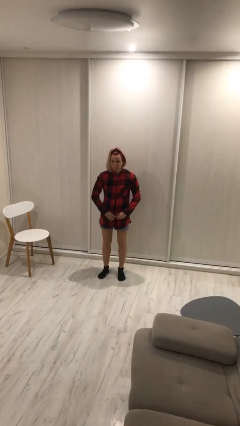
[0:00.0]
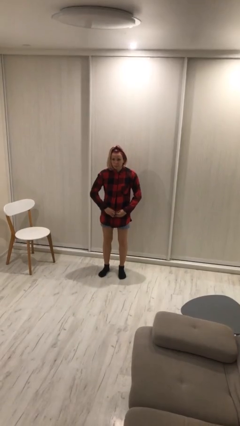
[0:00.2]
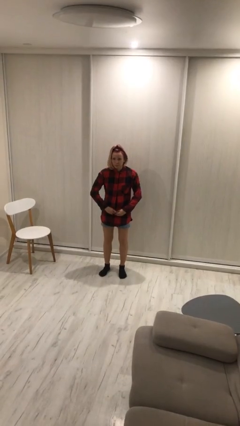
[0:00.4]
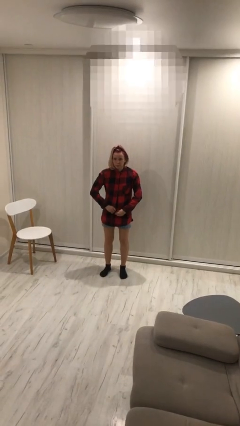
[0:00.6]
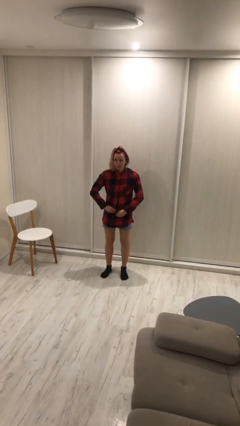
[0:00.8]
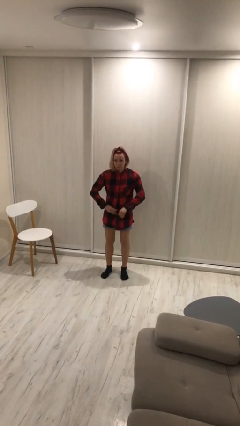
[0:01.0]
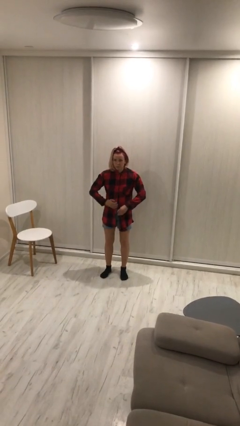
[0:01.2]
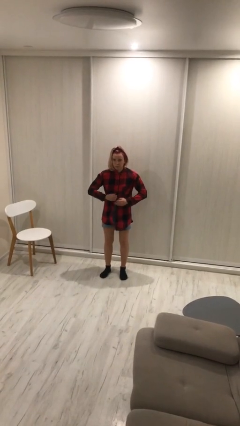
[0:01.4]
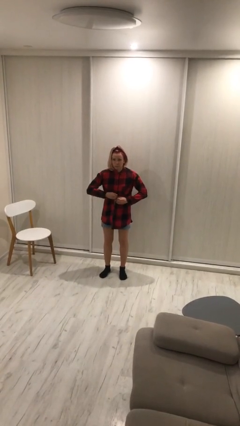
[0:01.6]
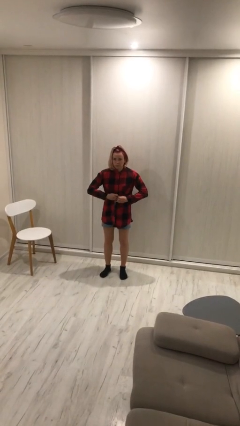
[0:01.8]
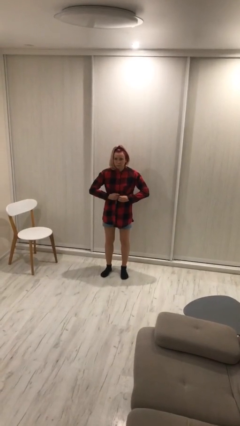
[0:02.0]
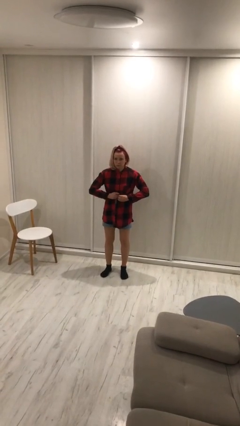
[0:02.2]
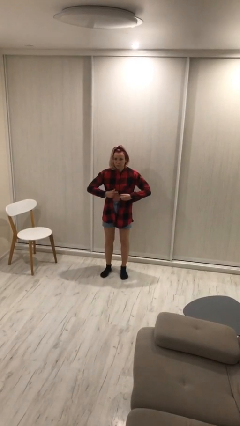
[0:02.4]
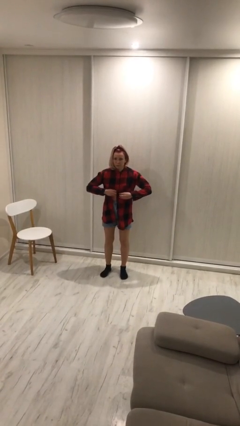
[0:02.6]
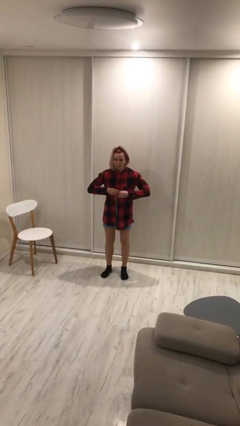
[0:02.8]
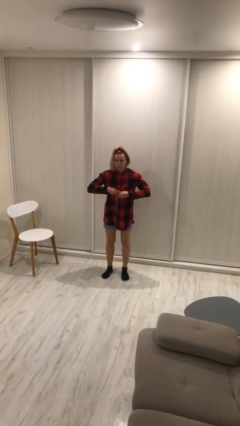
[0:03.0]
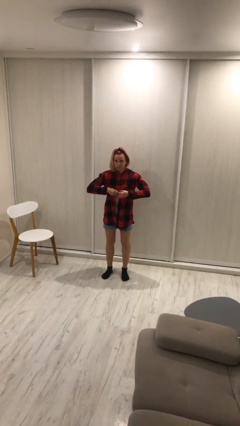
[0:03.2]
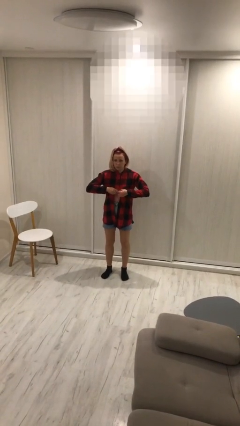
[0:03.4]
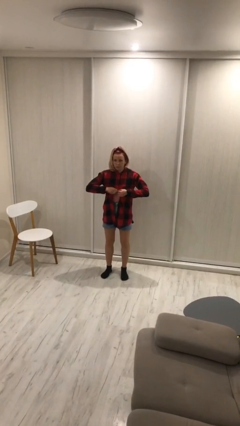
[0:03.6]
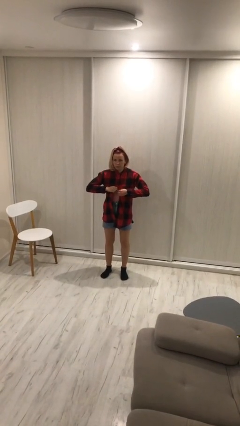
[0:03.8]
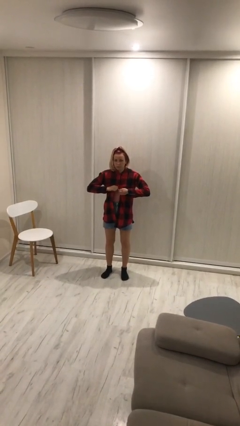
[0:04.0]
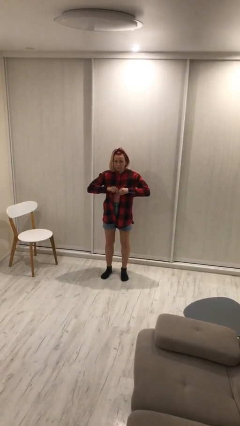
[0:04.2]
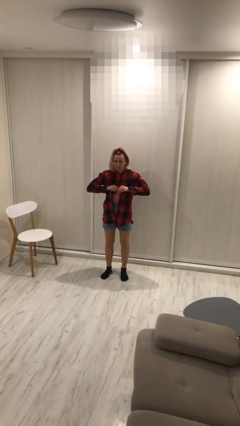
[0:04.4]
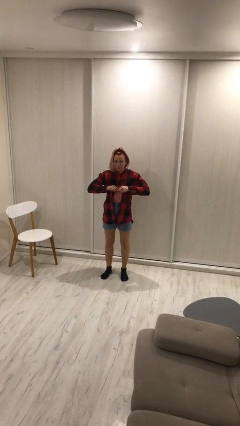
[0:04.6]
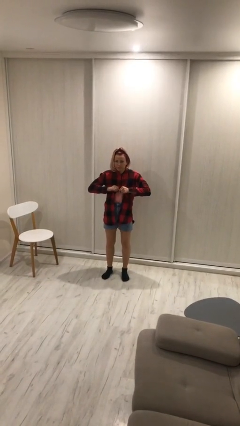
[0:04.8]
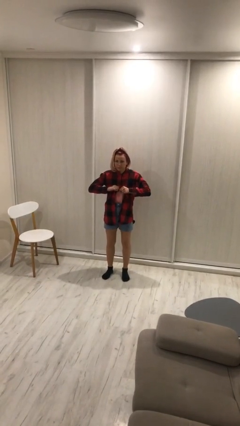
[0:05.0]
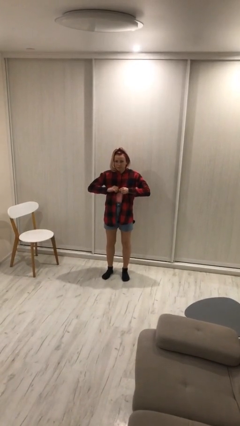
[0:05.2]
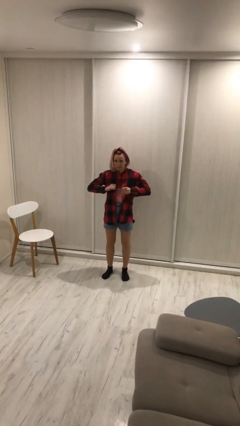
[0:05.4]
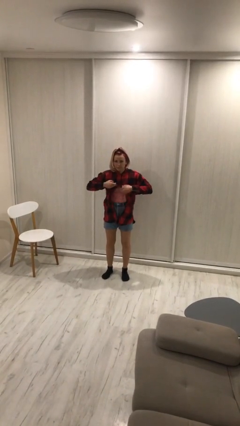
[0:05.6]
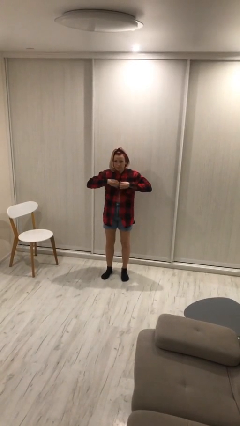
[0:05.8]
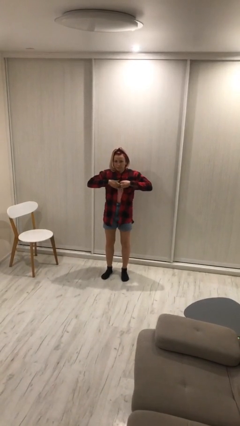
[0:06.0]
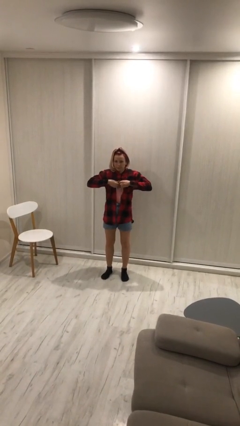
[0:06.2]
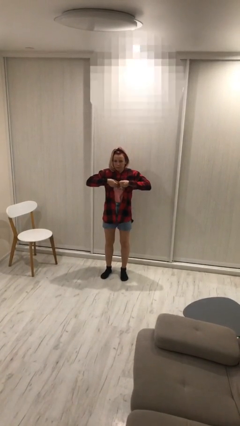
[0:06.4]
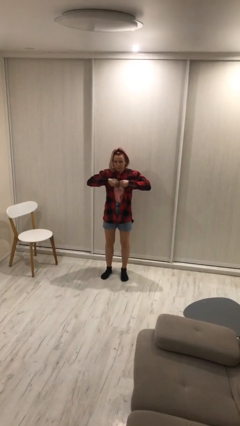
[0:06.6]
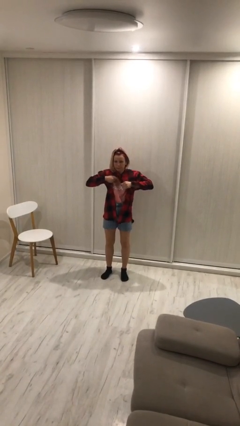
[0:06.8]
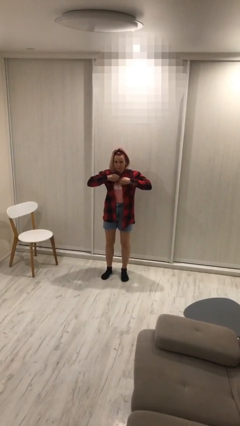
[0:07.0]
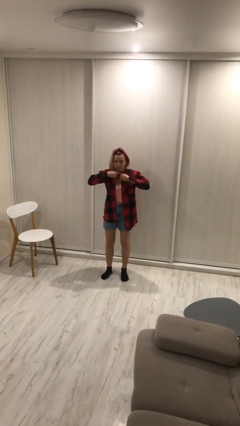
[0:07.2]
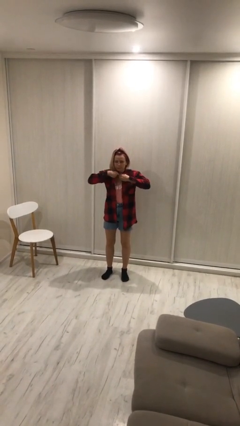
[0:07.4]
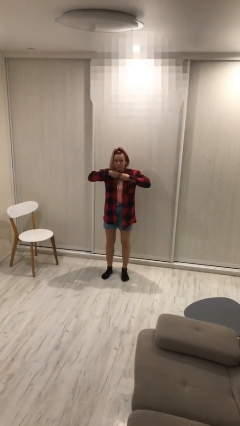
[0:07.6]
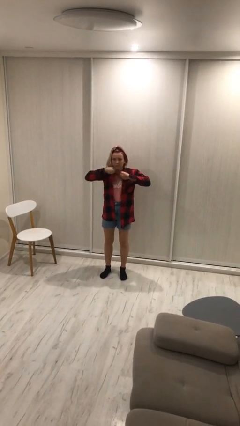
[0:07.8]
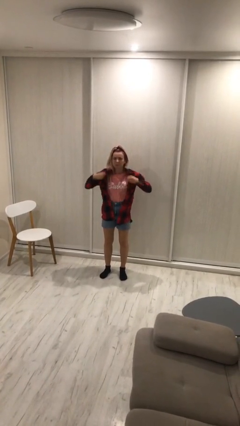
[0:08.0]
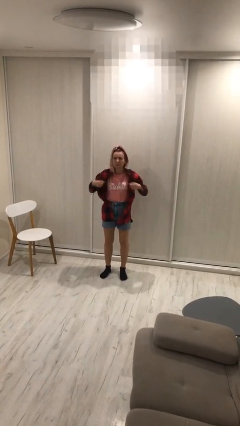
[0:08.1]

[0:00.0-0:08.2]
person unbuttons shirt

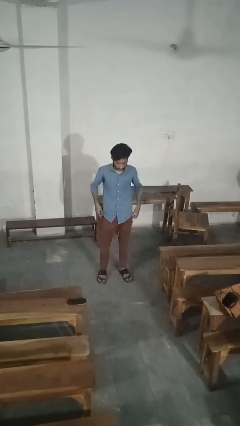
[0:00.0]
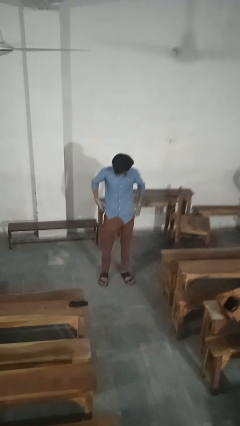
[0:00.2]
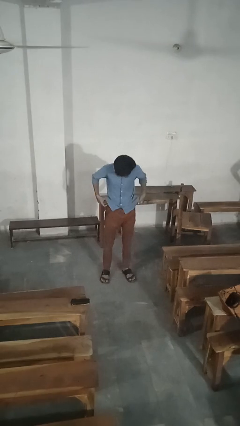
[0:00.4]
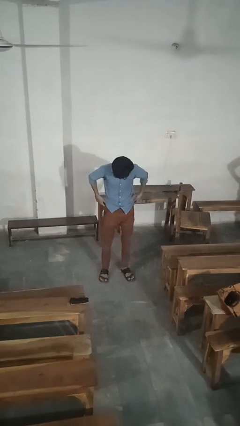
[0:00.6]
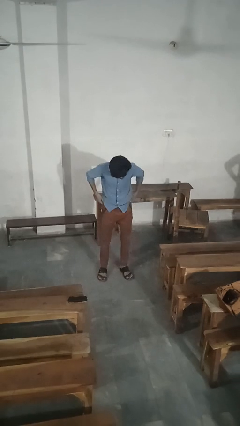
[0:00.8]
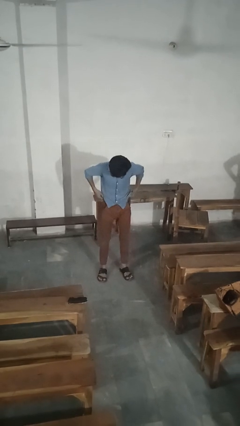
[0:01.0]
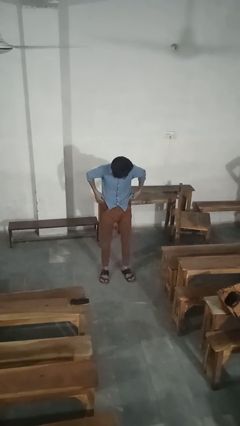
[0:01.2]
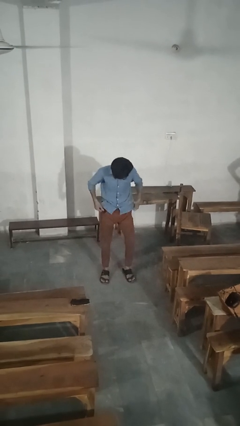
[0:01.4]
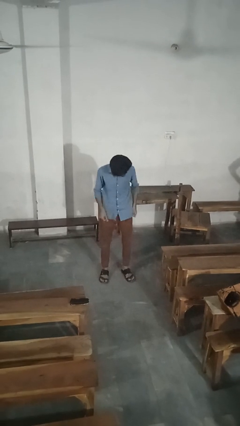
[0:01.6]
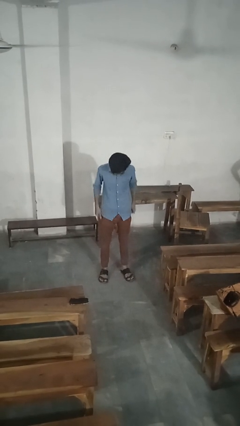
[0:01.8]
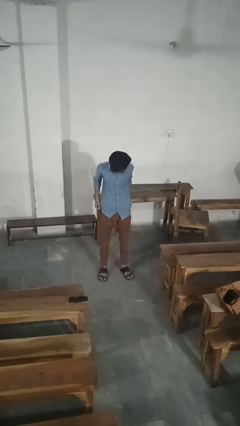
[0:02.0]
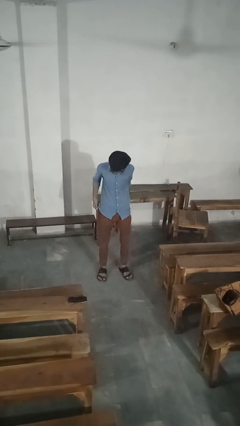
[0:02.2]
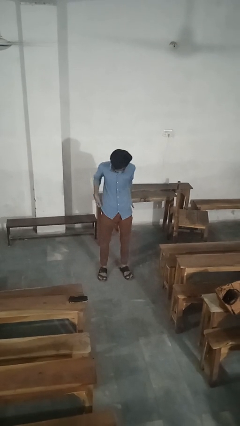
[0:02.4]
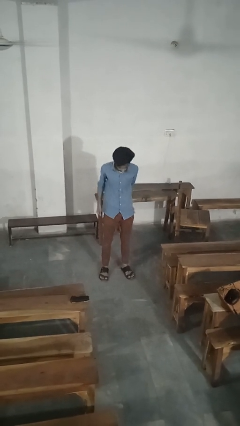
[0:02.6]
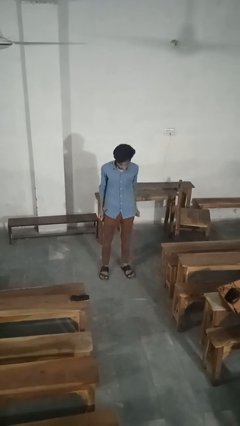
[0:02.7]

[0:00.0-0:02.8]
person hikes up pants

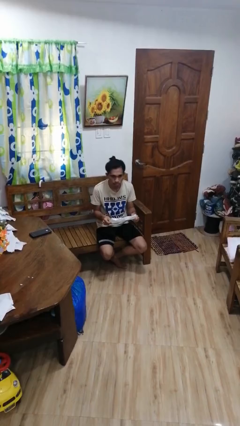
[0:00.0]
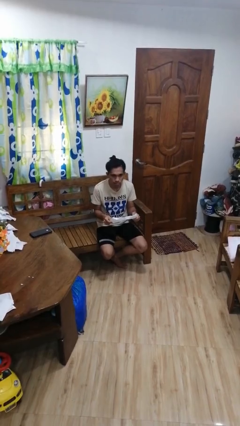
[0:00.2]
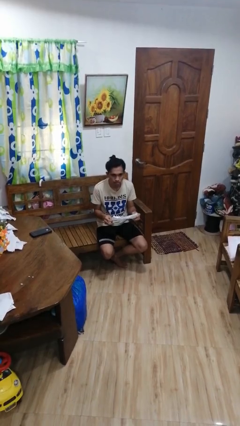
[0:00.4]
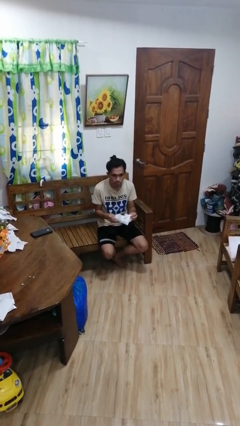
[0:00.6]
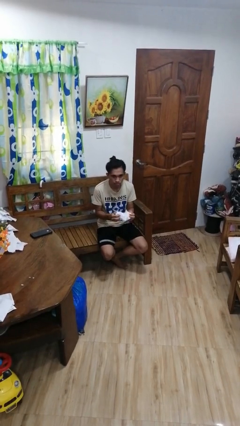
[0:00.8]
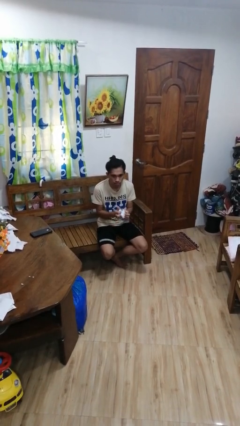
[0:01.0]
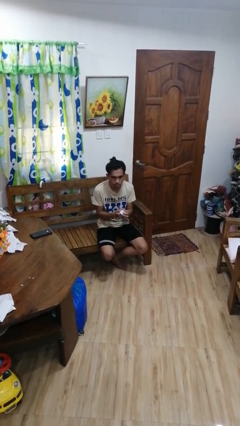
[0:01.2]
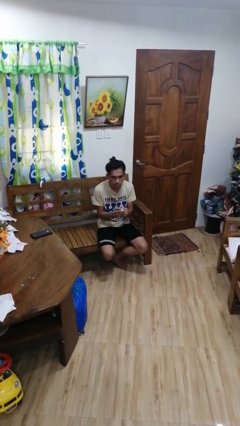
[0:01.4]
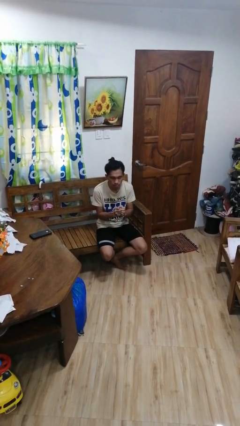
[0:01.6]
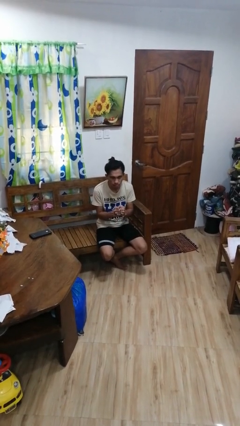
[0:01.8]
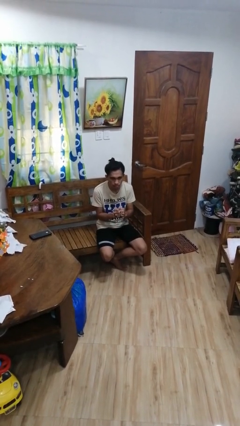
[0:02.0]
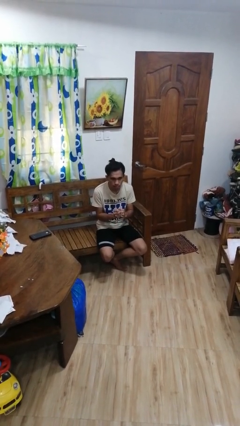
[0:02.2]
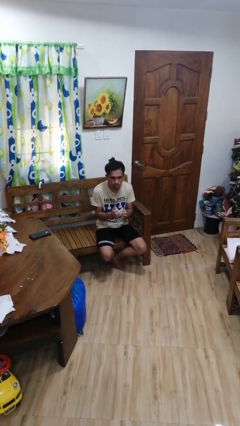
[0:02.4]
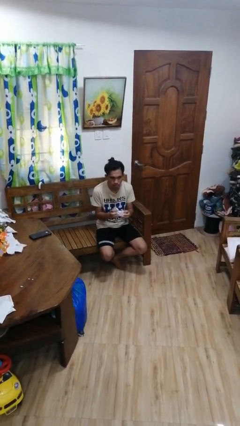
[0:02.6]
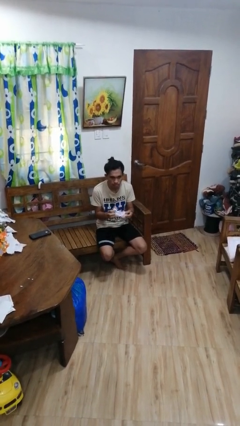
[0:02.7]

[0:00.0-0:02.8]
person crumples paper

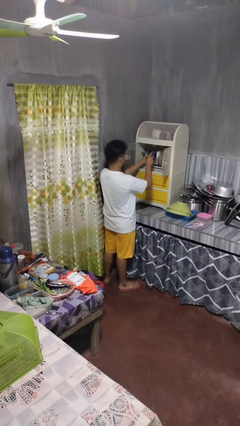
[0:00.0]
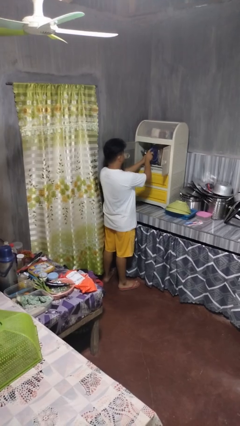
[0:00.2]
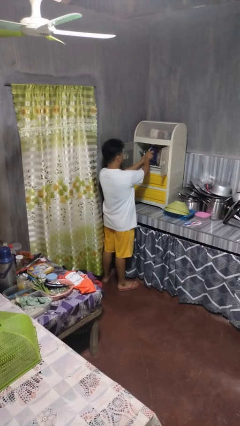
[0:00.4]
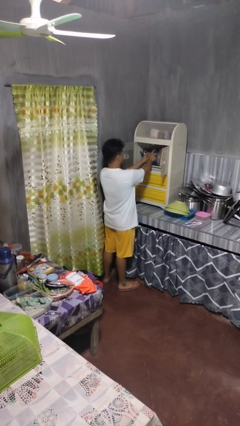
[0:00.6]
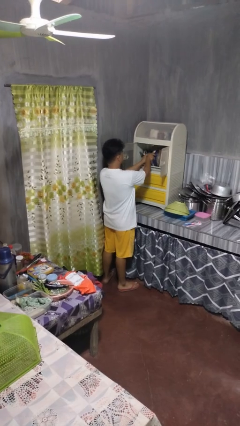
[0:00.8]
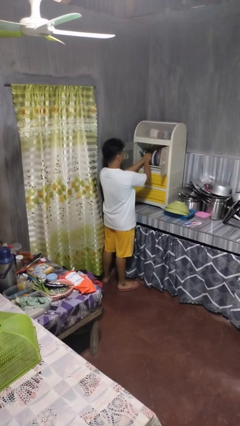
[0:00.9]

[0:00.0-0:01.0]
person puts object in cabinet

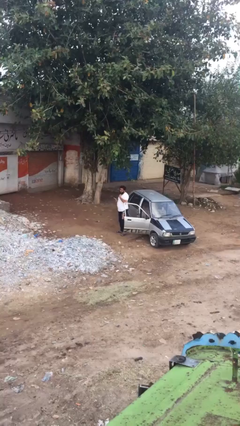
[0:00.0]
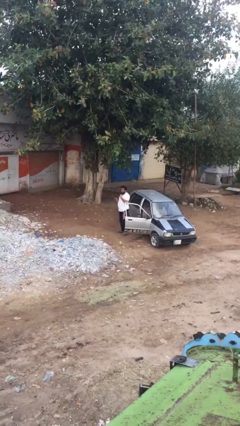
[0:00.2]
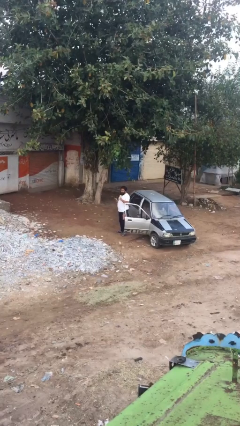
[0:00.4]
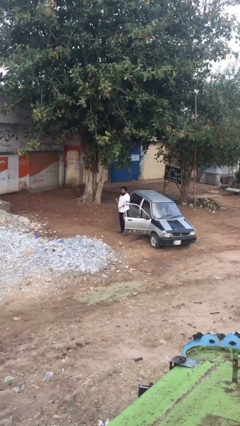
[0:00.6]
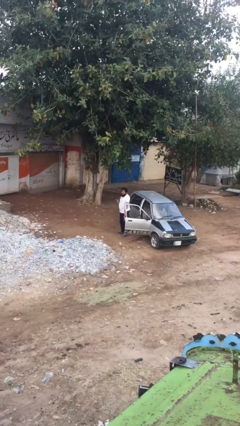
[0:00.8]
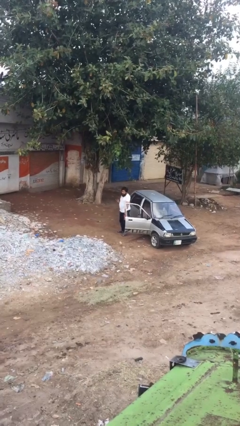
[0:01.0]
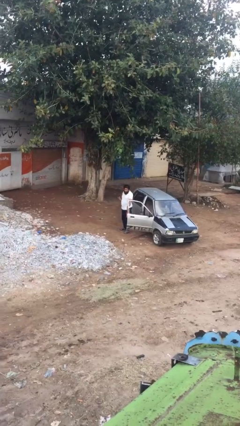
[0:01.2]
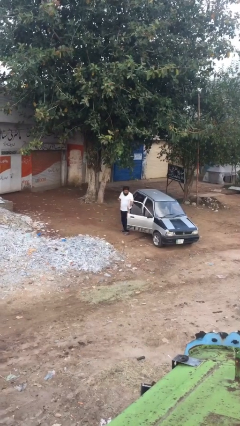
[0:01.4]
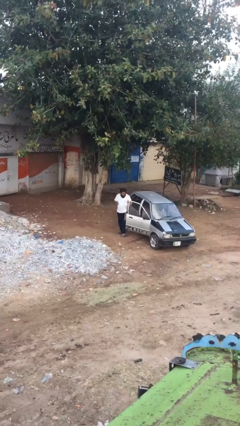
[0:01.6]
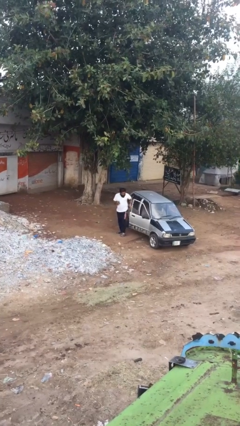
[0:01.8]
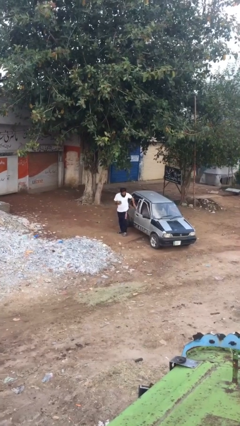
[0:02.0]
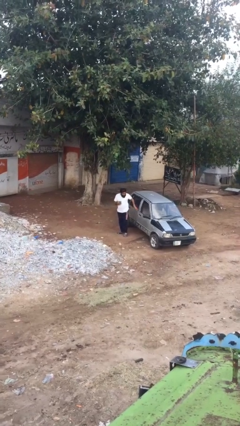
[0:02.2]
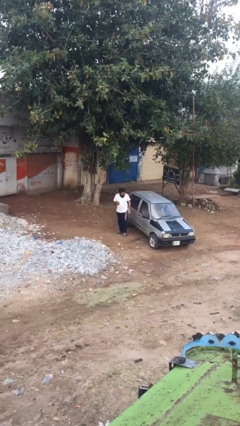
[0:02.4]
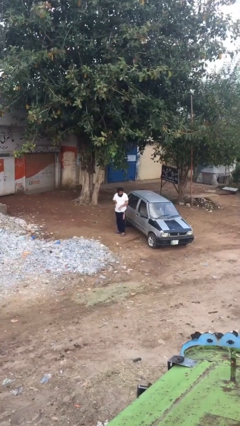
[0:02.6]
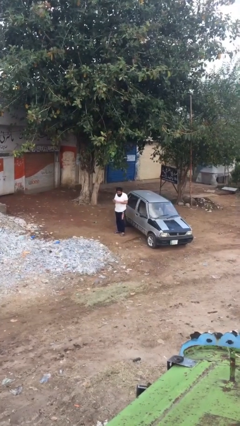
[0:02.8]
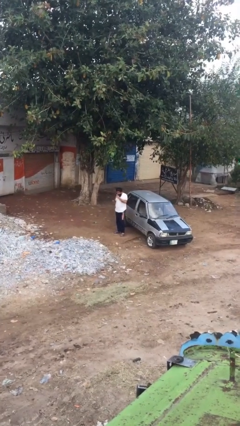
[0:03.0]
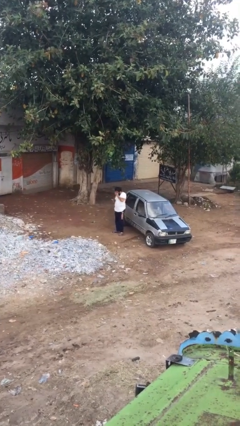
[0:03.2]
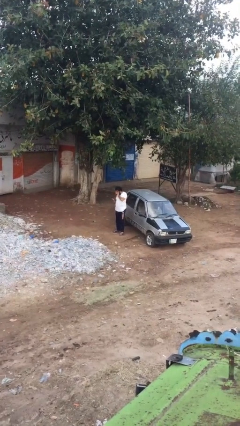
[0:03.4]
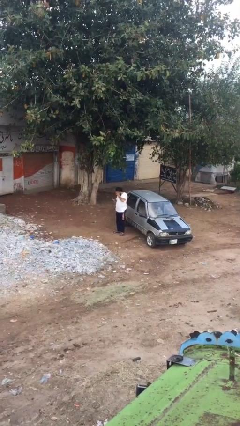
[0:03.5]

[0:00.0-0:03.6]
person closes car door
